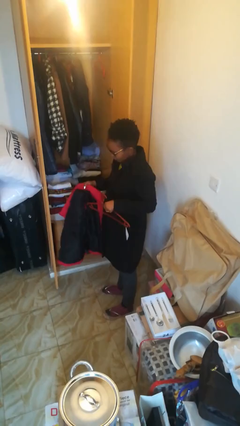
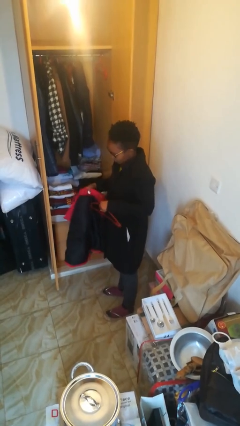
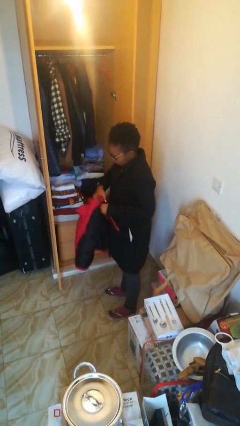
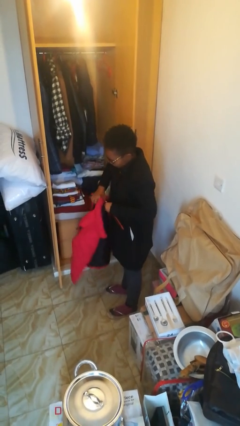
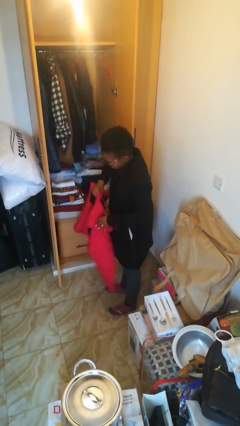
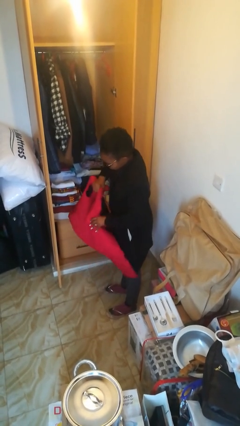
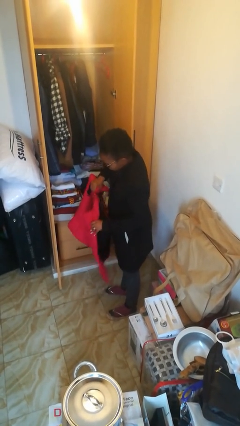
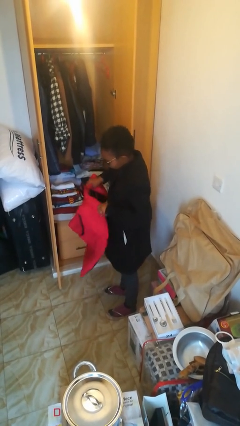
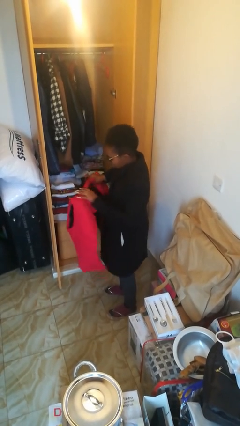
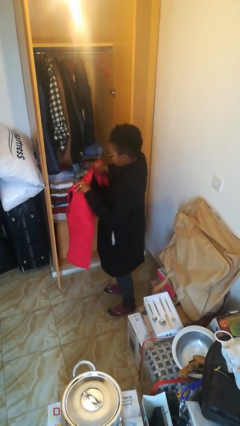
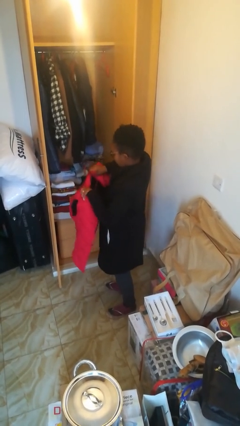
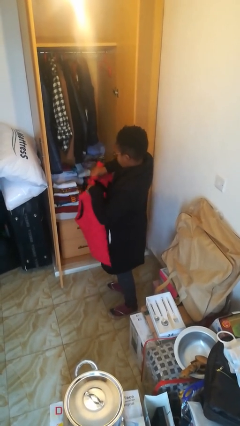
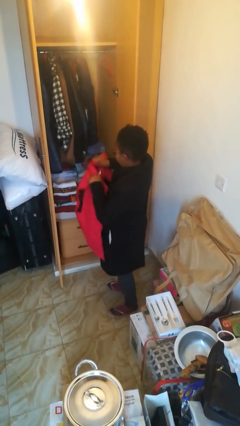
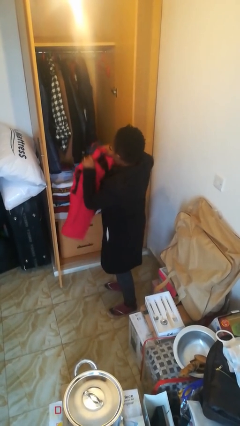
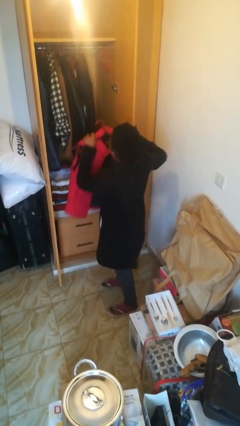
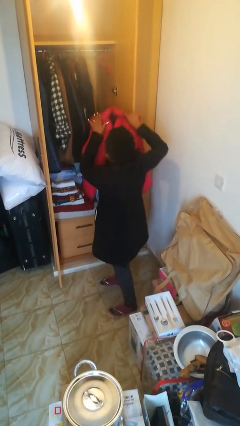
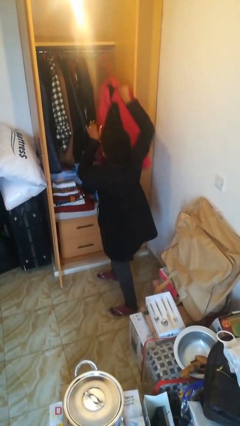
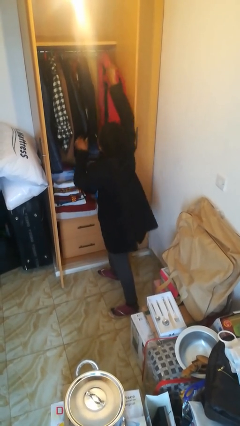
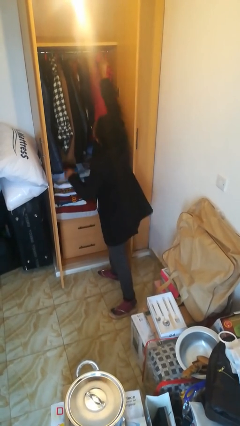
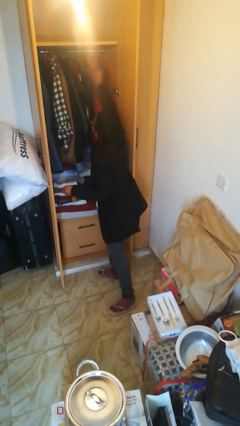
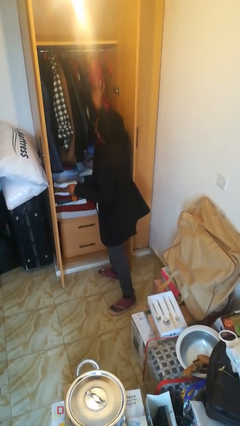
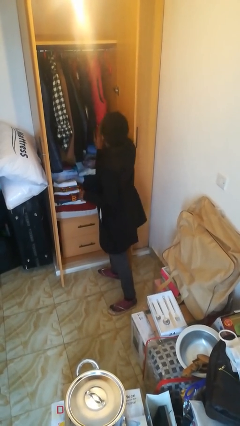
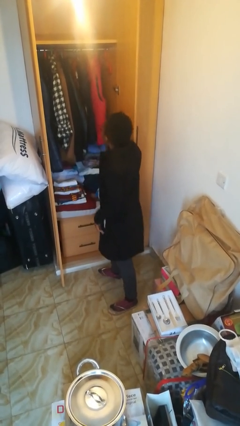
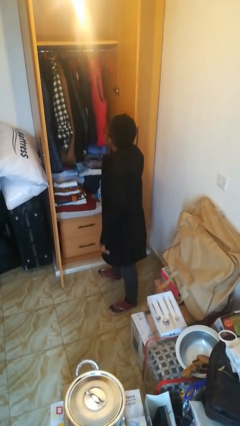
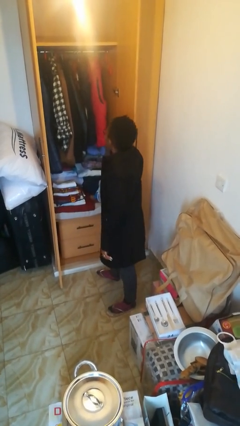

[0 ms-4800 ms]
person puts clothes into closet

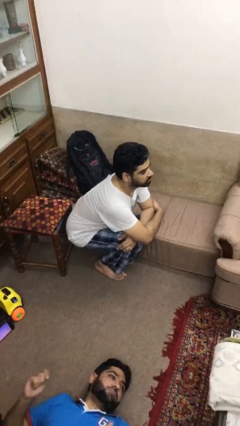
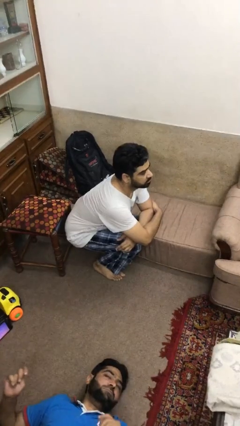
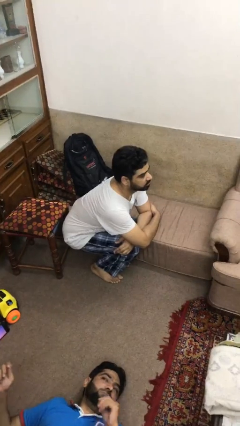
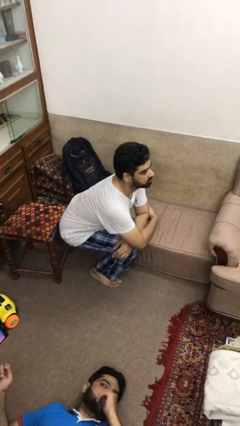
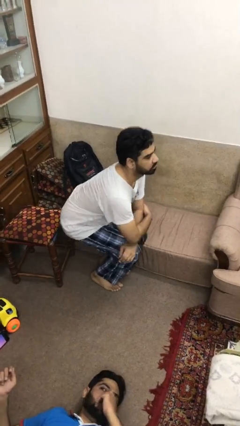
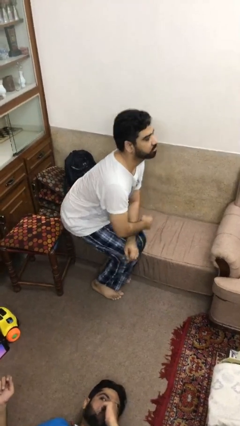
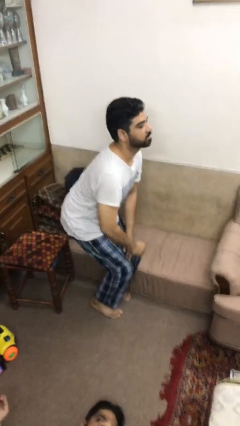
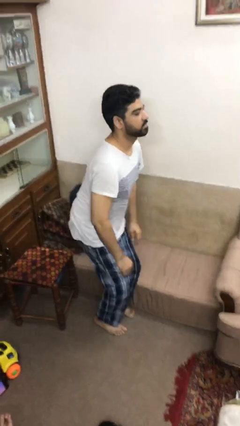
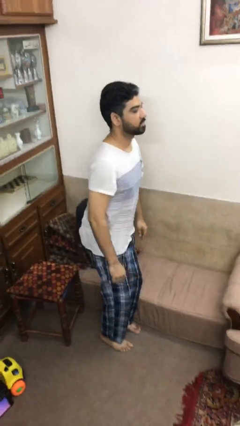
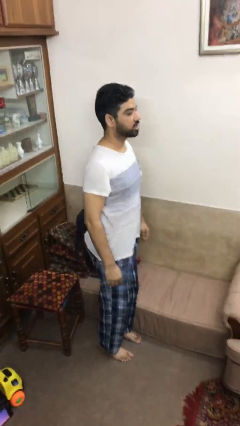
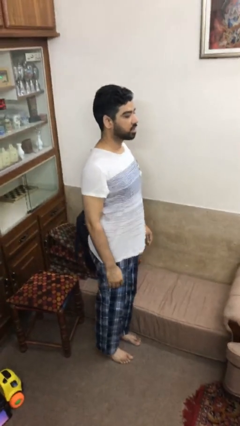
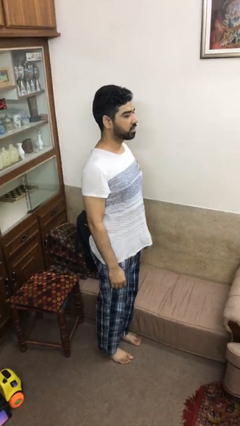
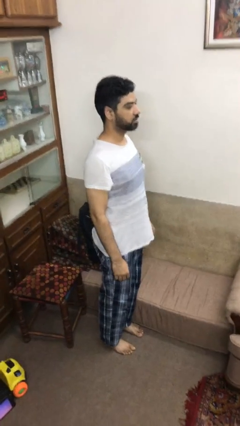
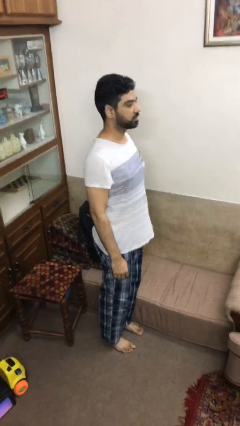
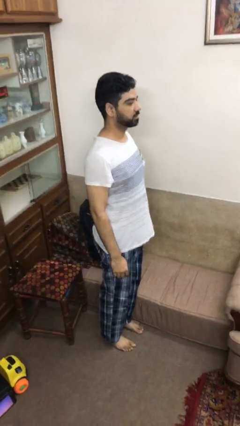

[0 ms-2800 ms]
person stands up

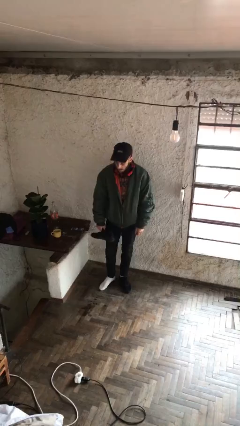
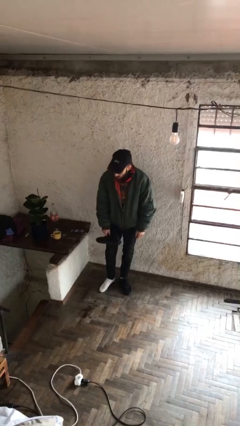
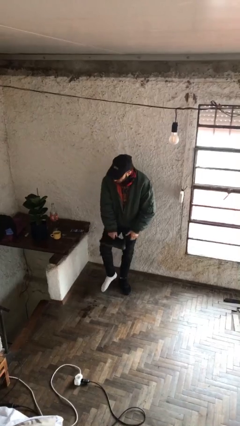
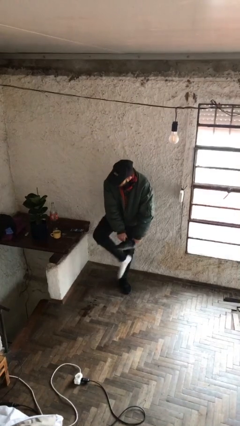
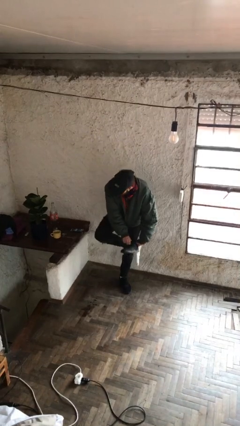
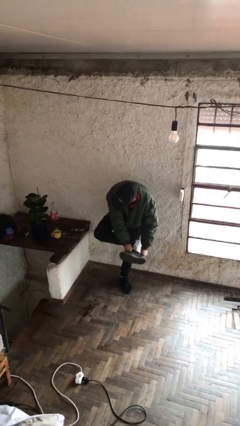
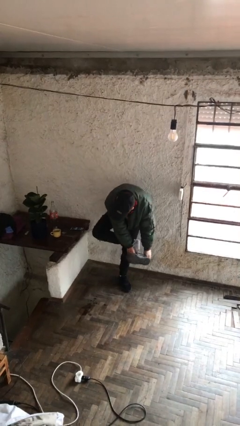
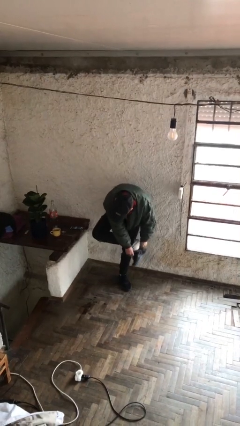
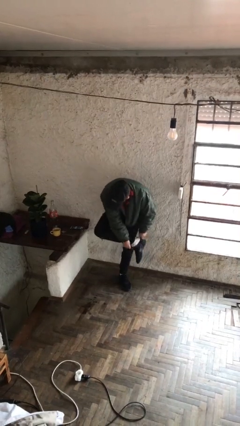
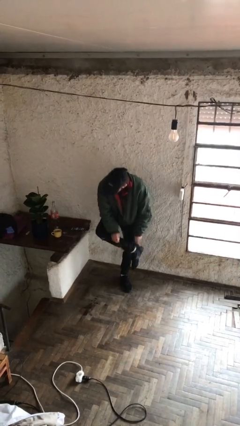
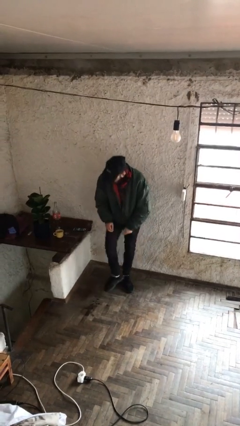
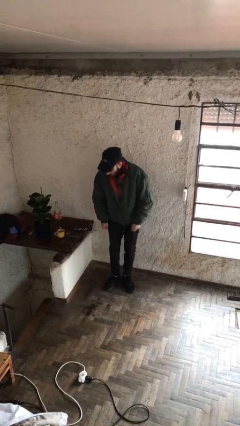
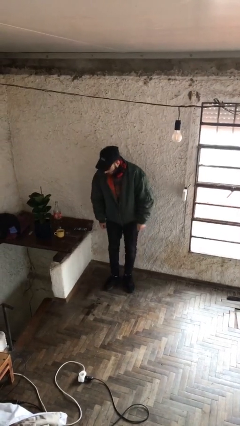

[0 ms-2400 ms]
person puts on shoes

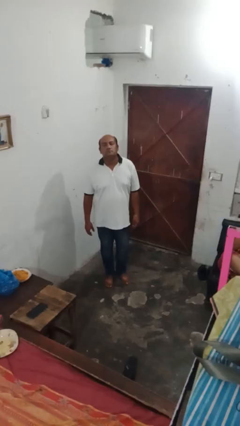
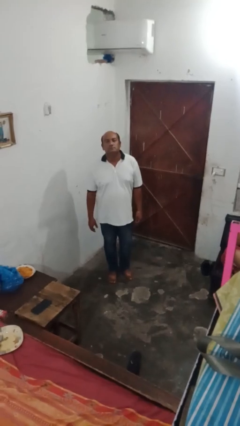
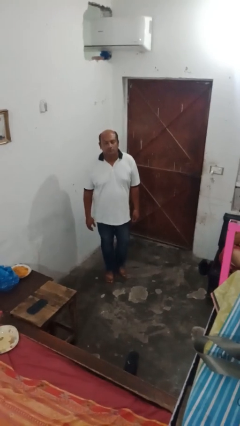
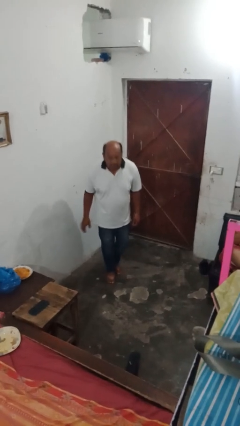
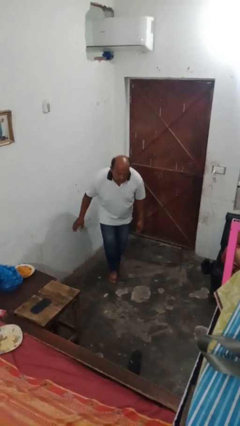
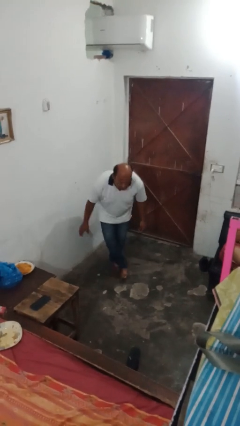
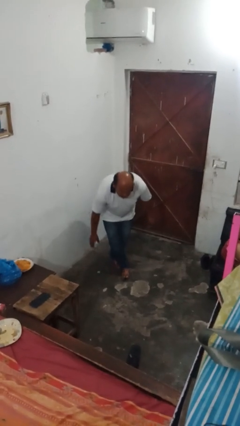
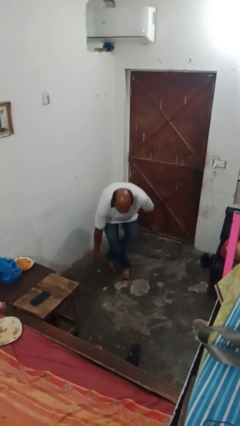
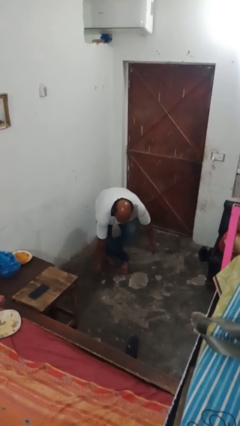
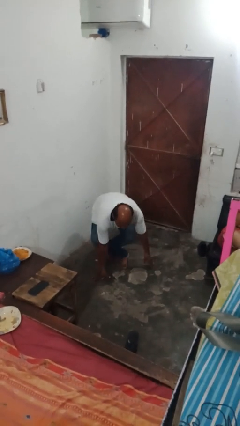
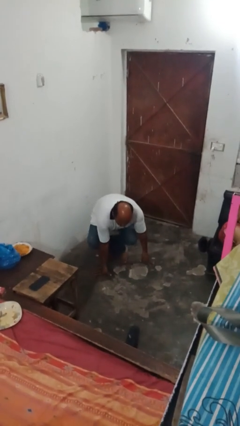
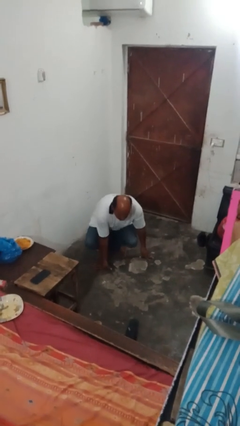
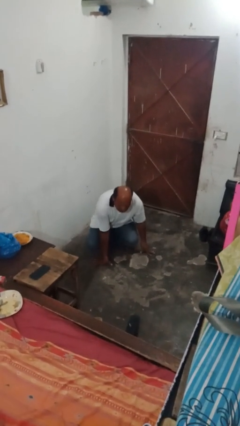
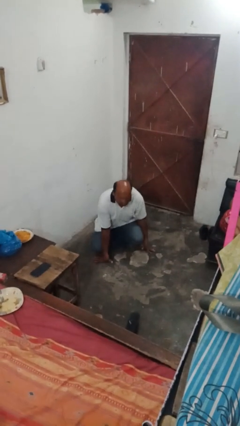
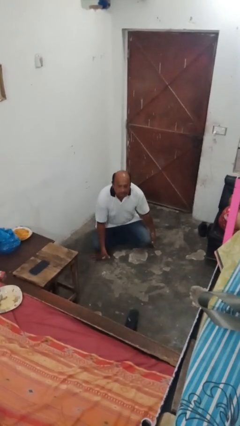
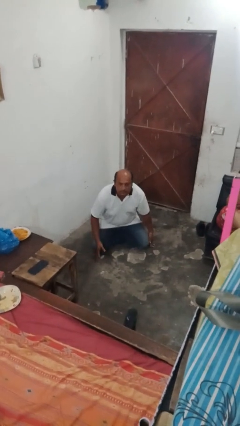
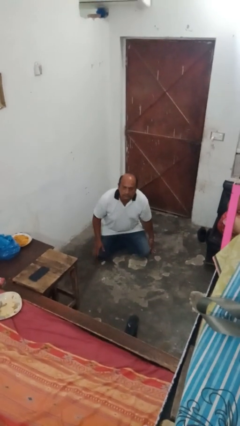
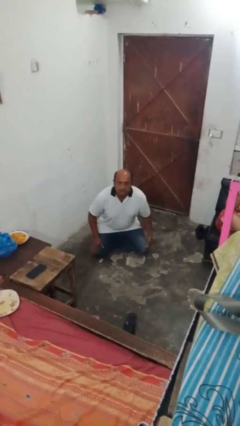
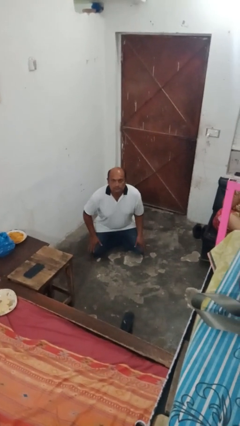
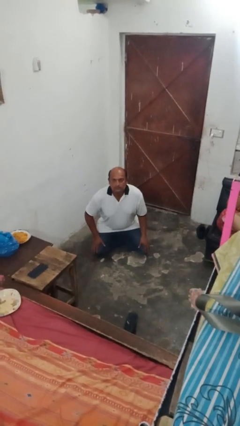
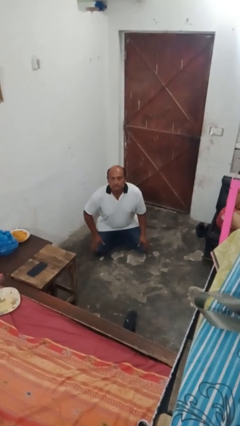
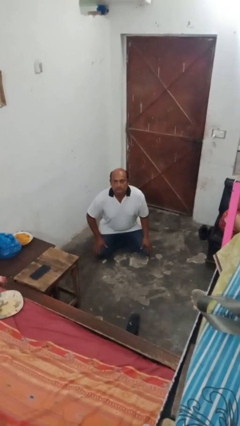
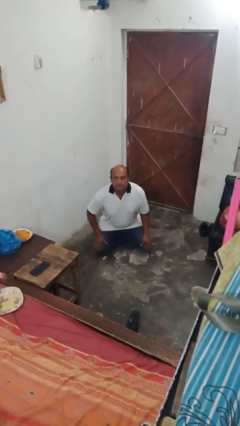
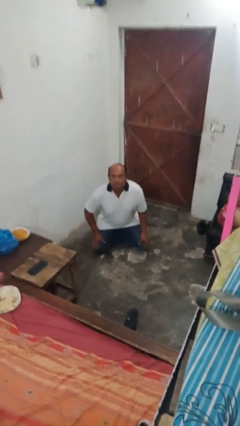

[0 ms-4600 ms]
person sits crisscross

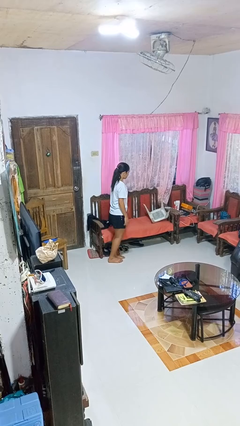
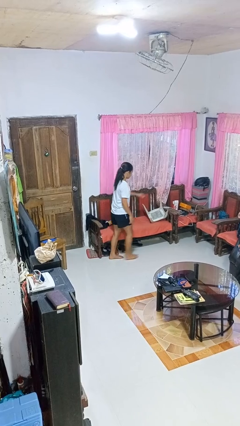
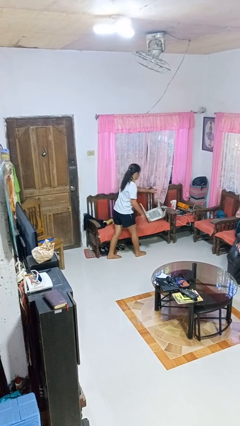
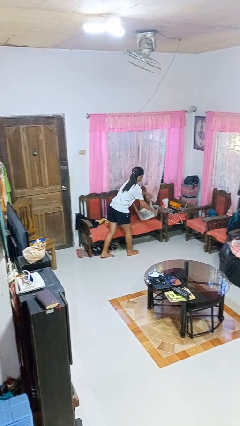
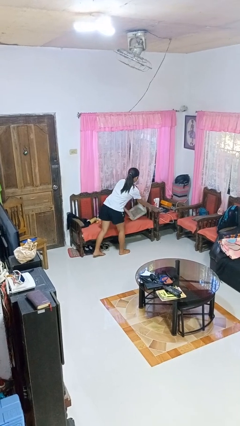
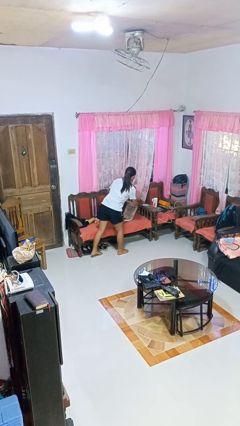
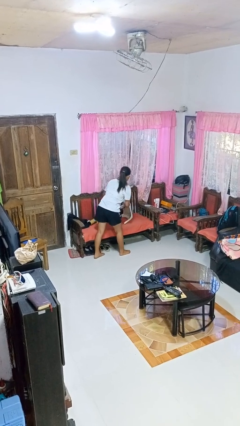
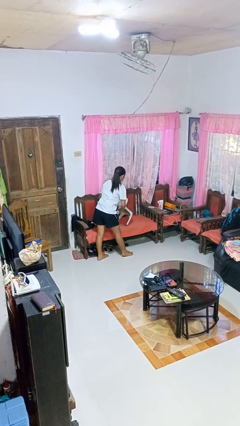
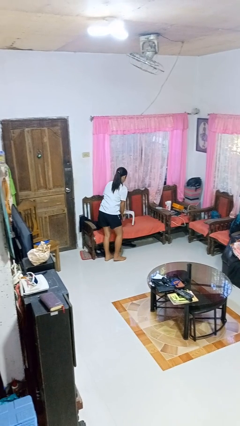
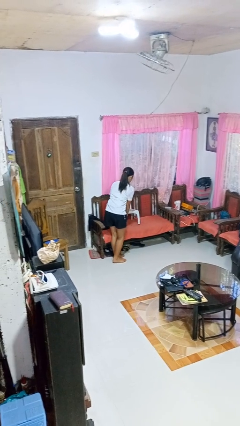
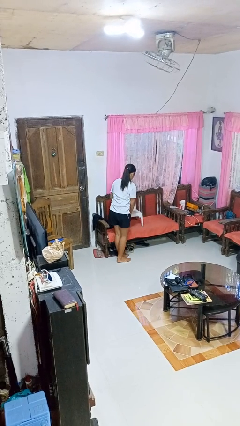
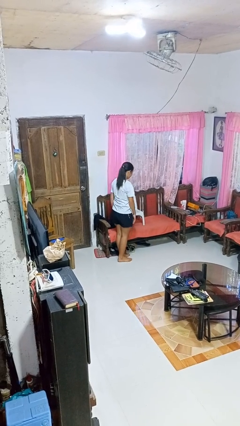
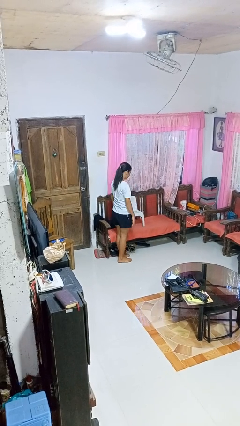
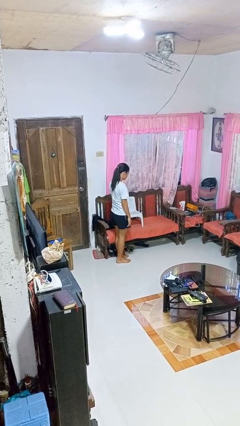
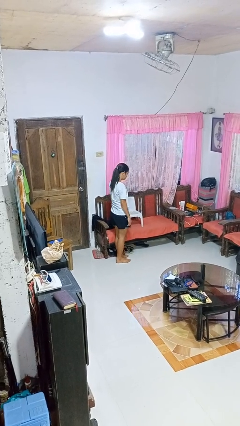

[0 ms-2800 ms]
person sets upright furniture
